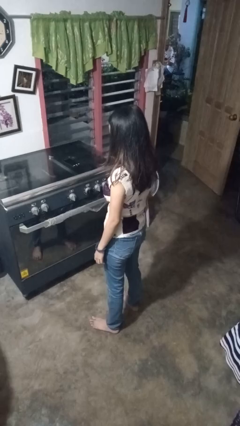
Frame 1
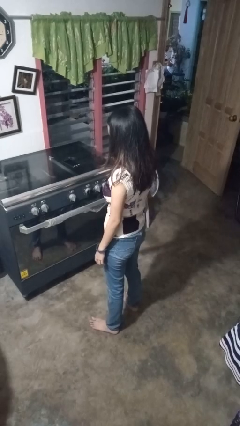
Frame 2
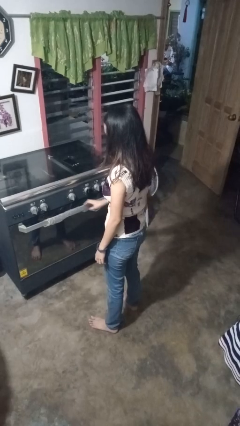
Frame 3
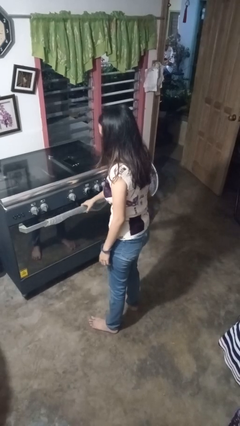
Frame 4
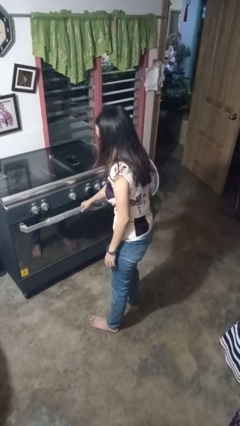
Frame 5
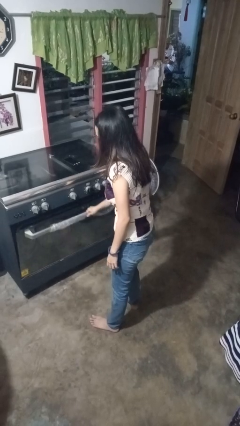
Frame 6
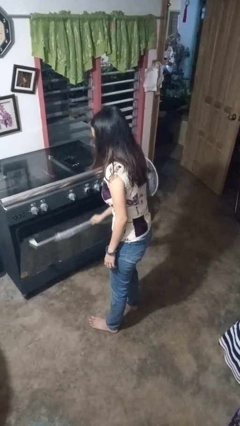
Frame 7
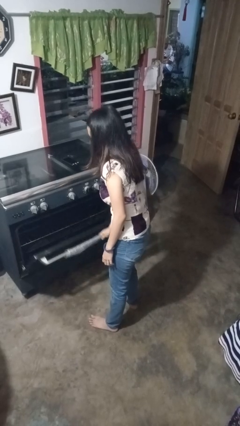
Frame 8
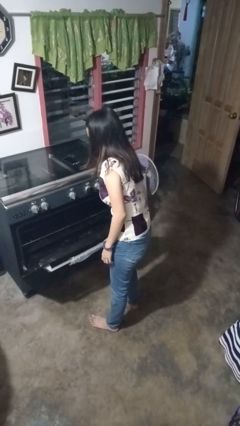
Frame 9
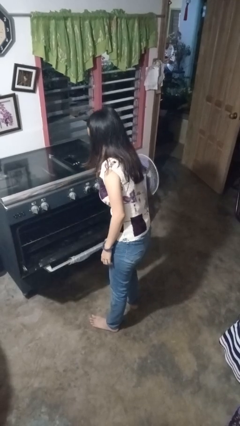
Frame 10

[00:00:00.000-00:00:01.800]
person opens oven door

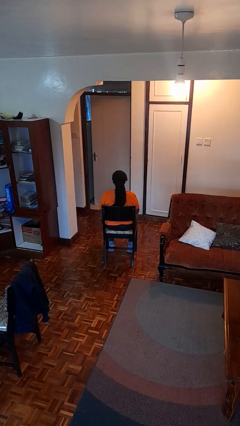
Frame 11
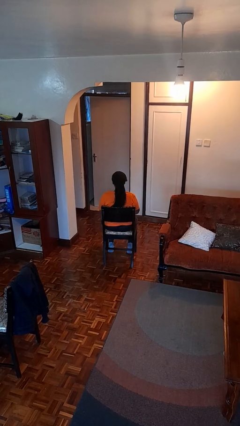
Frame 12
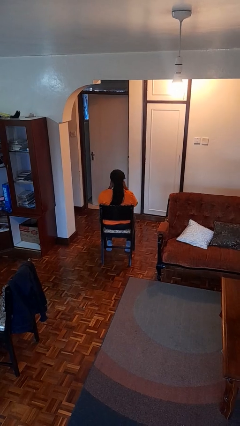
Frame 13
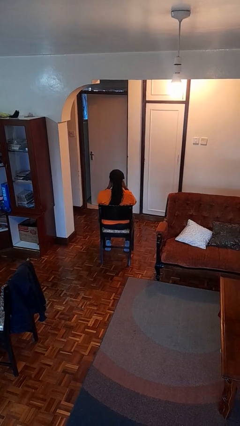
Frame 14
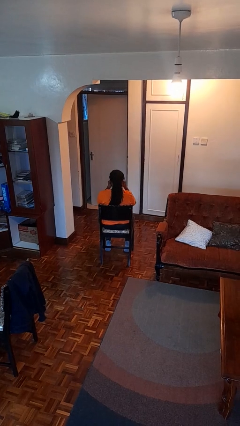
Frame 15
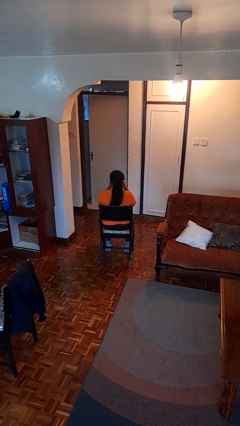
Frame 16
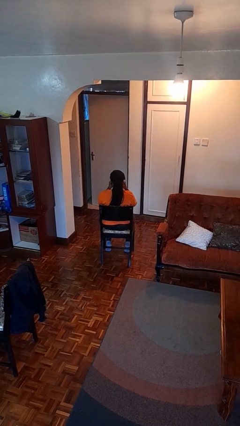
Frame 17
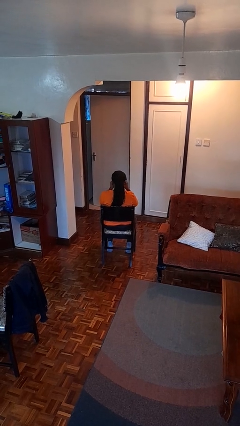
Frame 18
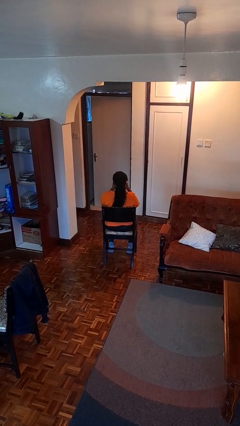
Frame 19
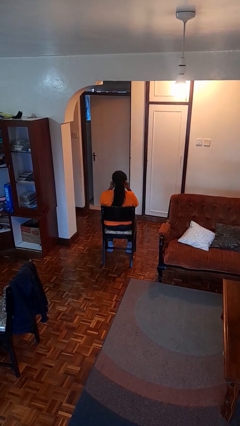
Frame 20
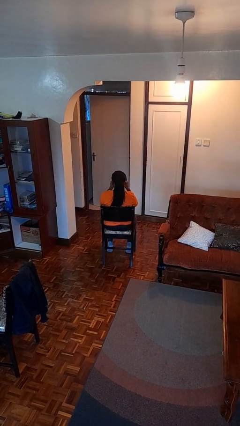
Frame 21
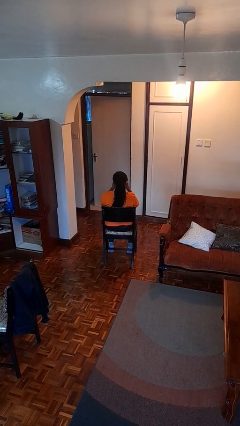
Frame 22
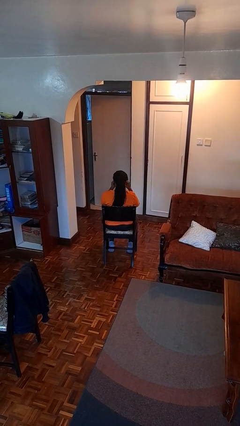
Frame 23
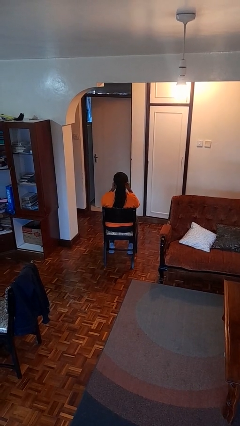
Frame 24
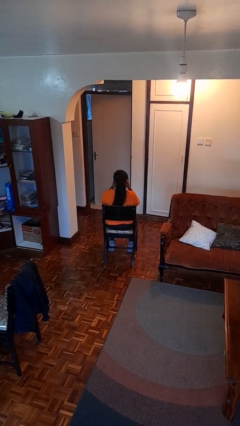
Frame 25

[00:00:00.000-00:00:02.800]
person rubs eyes

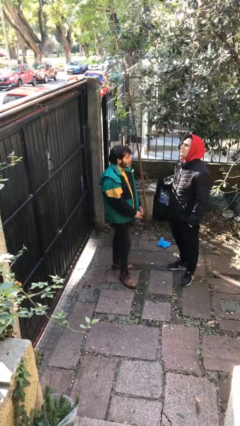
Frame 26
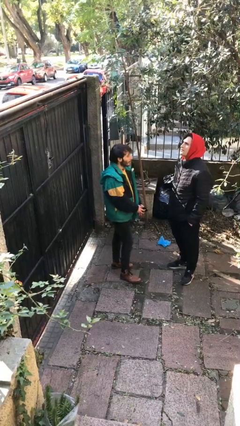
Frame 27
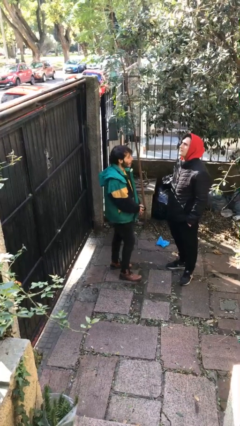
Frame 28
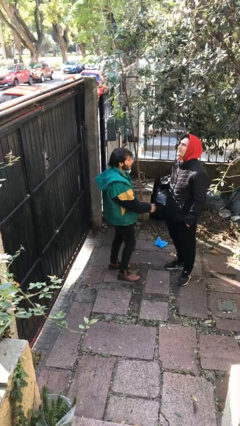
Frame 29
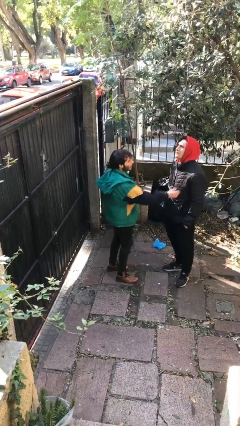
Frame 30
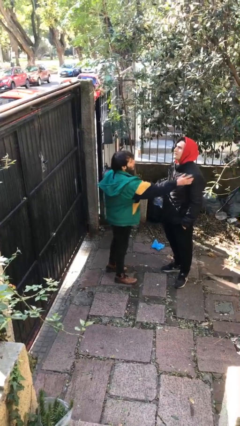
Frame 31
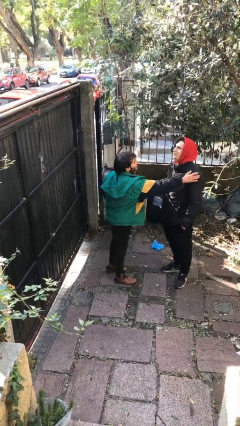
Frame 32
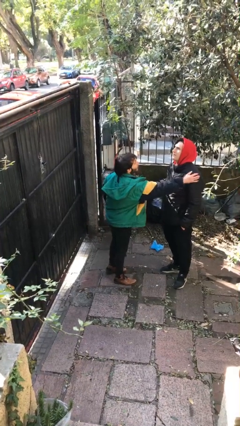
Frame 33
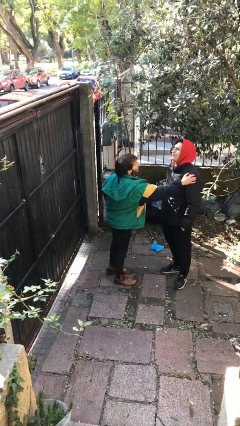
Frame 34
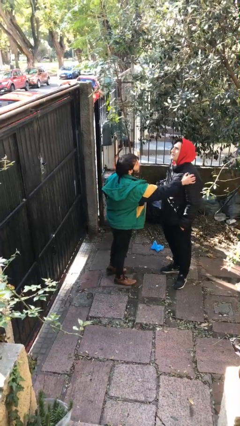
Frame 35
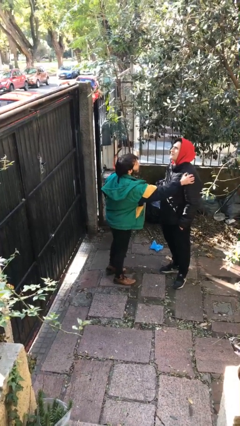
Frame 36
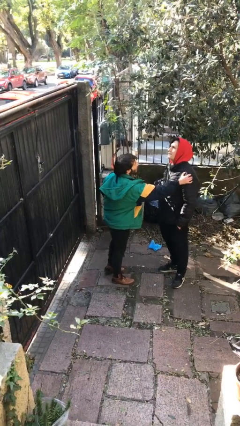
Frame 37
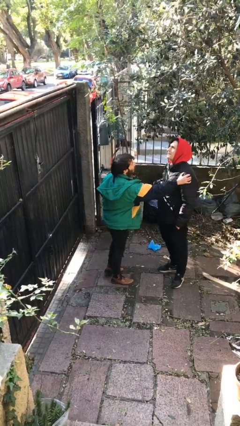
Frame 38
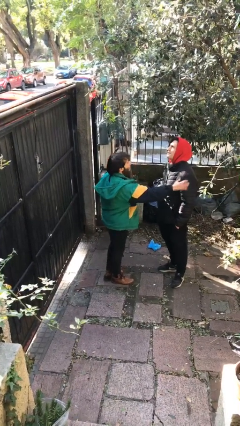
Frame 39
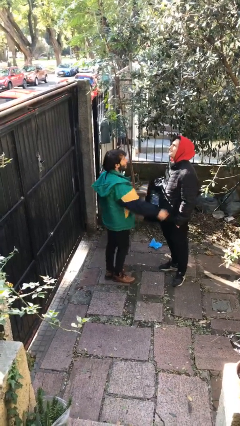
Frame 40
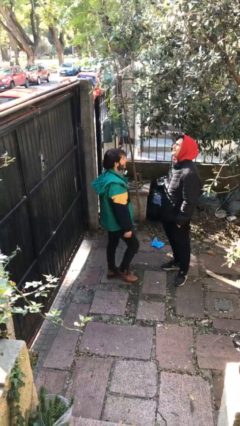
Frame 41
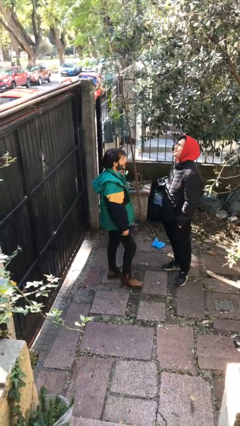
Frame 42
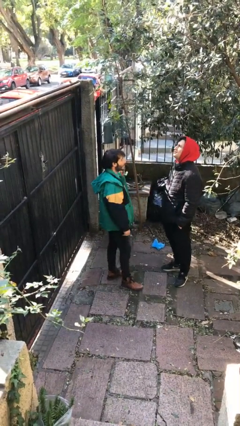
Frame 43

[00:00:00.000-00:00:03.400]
person pounds shoulders of person

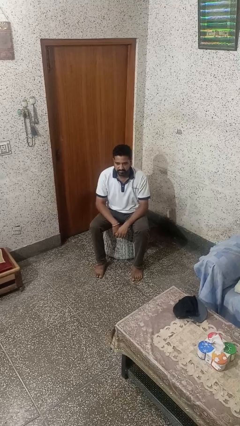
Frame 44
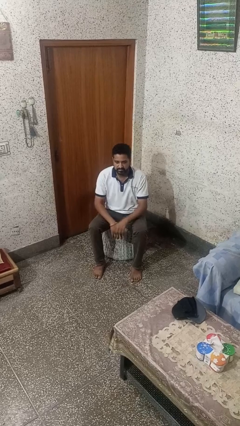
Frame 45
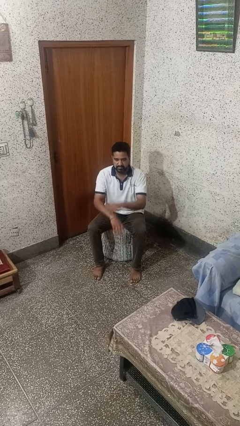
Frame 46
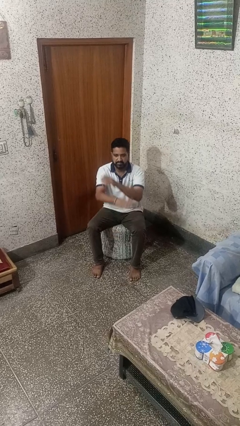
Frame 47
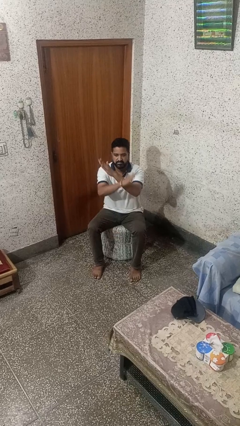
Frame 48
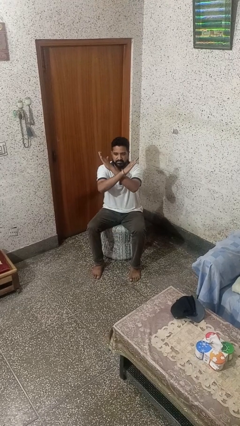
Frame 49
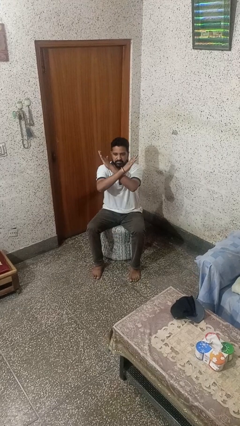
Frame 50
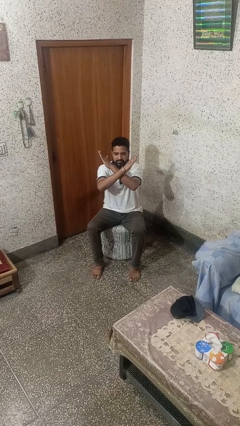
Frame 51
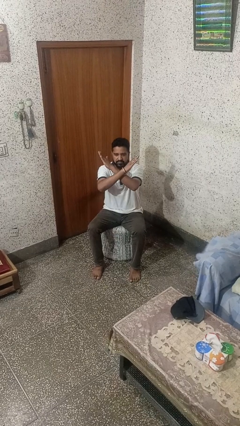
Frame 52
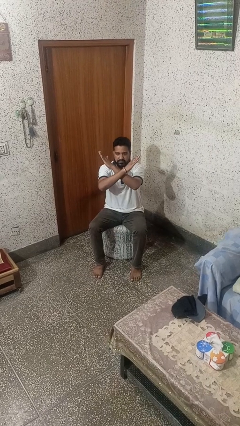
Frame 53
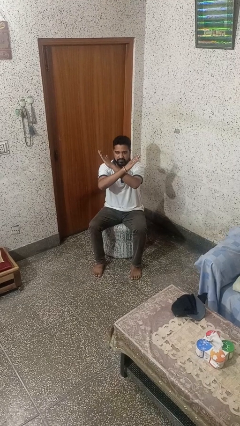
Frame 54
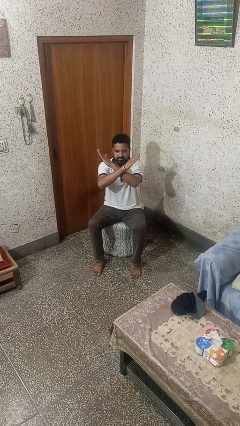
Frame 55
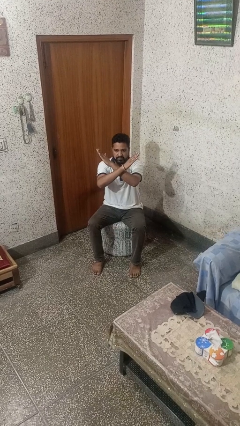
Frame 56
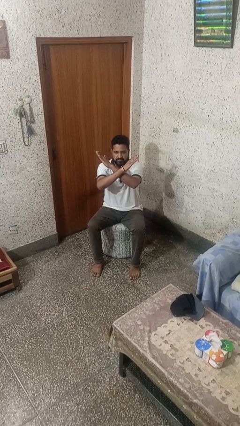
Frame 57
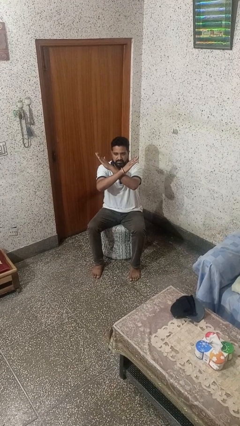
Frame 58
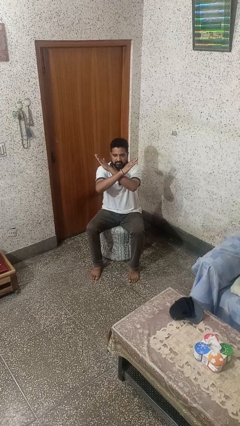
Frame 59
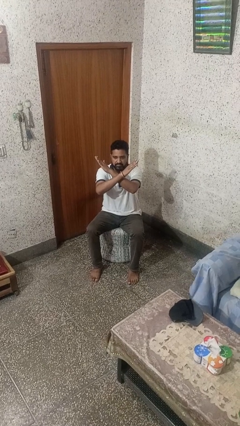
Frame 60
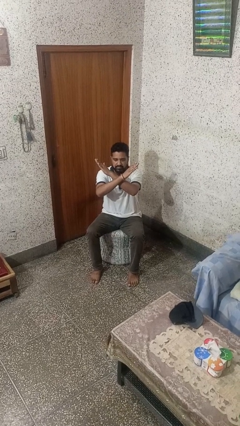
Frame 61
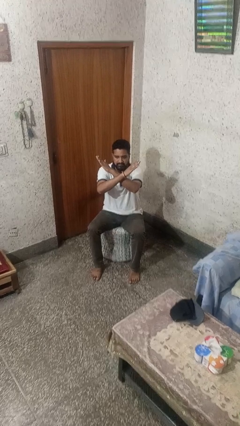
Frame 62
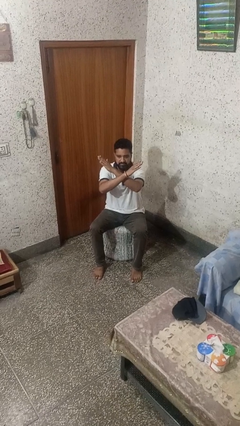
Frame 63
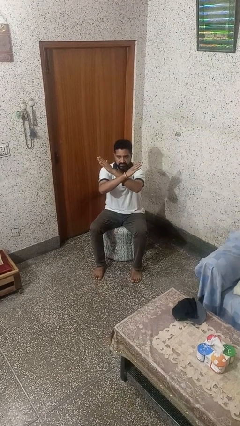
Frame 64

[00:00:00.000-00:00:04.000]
person gestures arms x

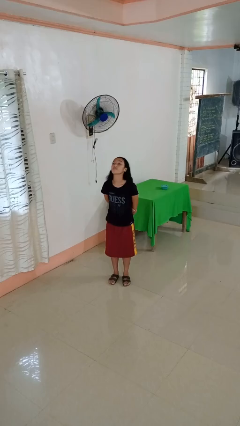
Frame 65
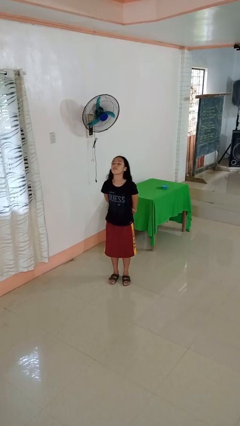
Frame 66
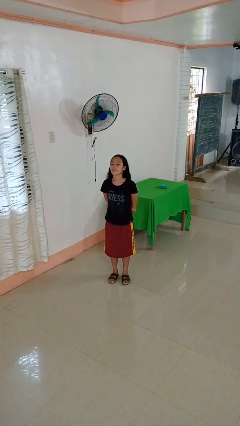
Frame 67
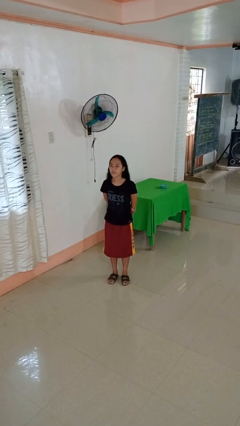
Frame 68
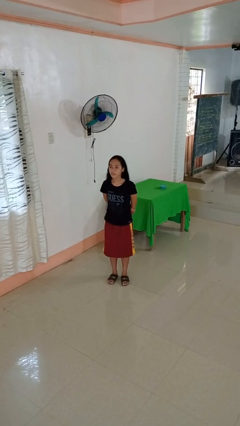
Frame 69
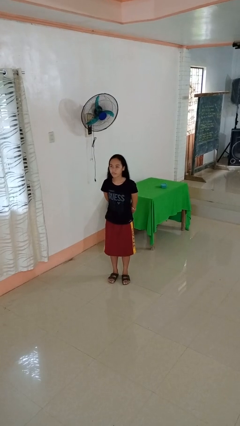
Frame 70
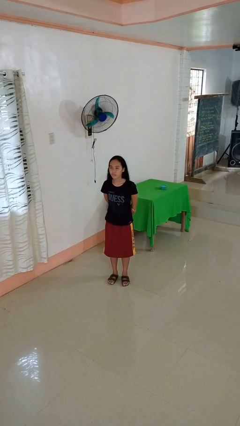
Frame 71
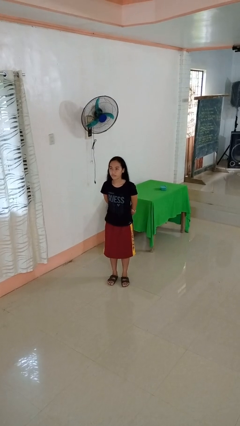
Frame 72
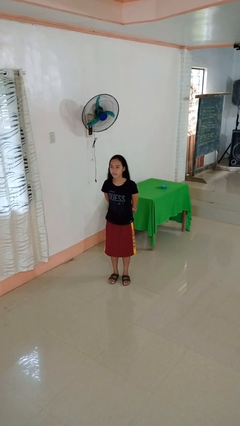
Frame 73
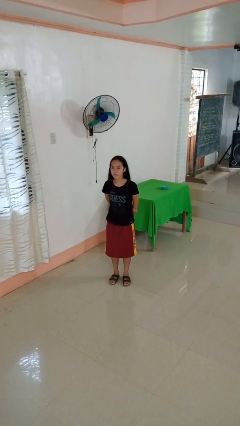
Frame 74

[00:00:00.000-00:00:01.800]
person nods head

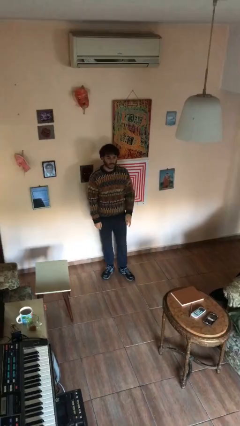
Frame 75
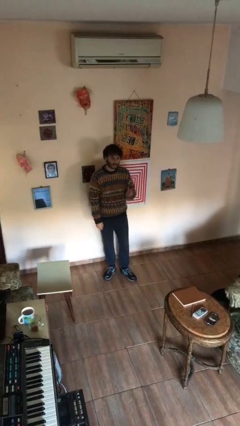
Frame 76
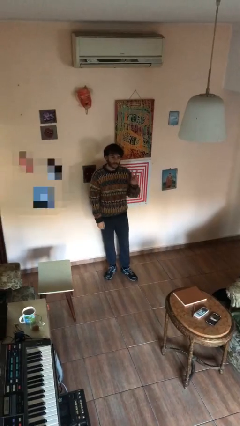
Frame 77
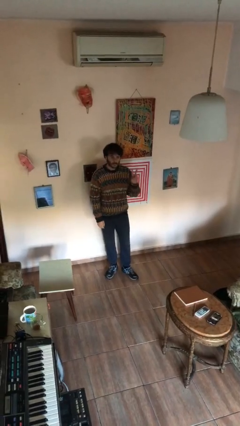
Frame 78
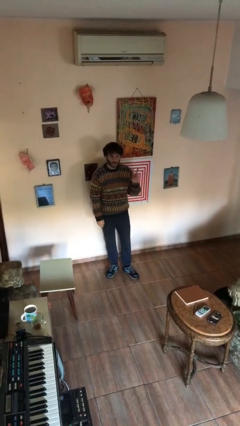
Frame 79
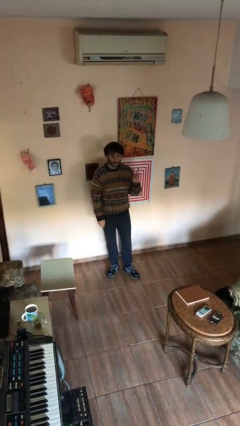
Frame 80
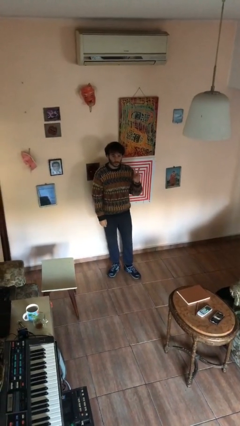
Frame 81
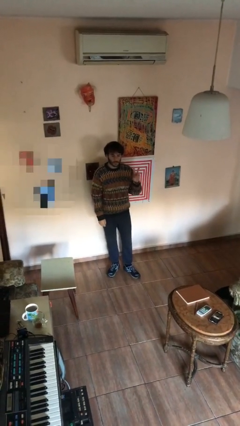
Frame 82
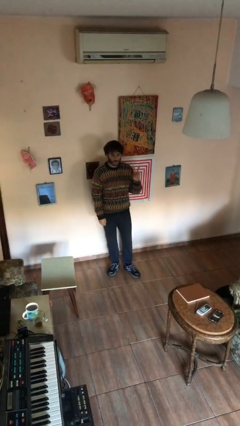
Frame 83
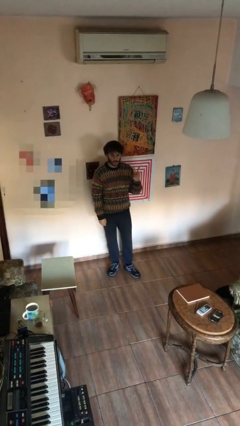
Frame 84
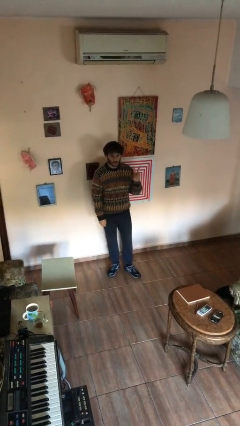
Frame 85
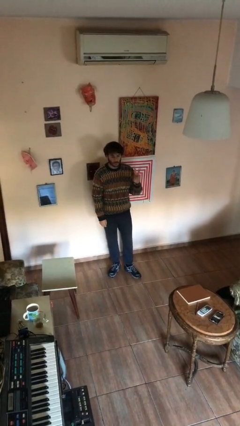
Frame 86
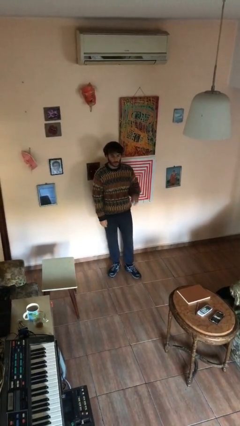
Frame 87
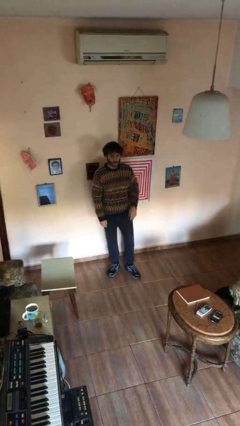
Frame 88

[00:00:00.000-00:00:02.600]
person gestures peace

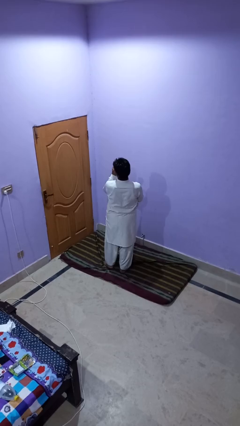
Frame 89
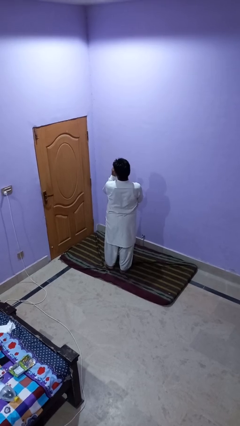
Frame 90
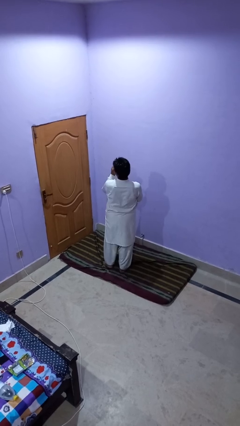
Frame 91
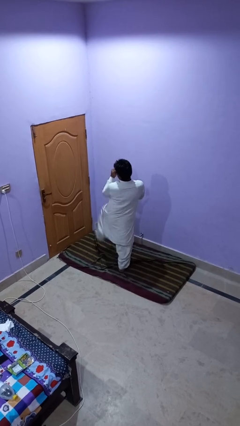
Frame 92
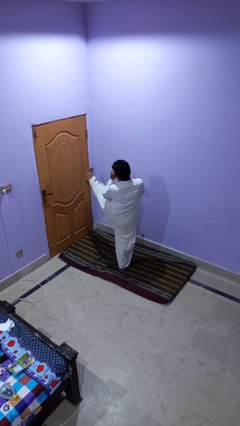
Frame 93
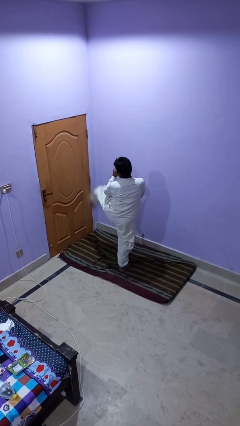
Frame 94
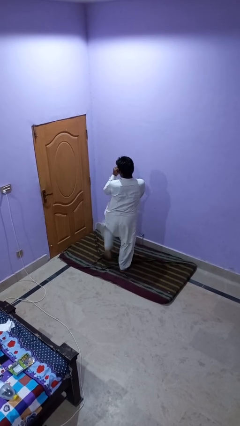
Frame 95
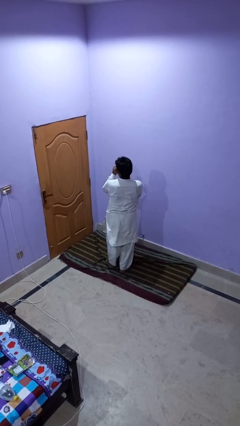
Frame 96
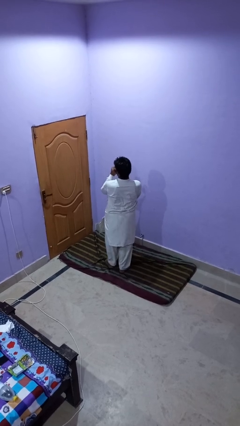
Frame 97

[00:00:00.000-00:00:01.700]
person karate kicks
